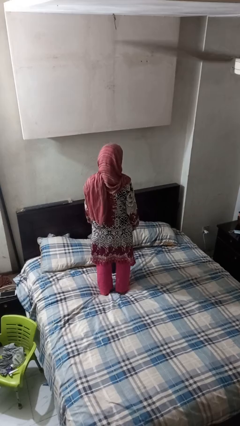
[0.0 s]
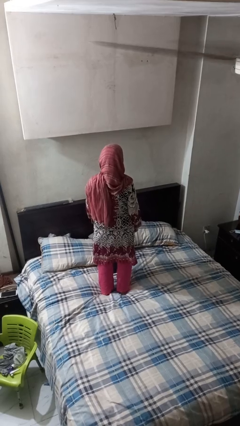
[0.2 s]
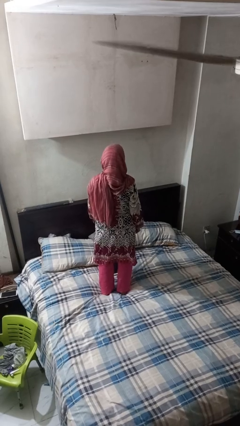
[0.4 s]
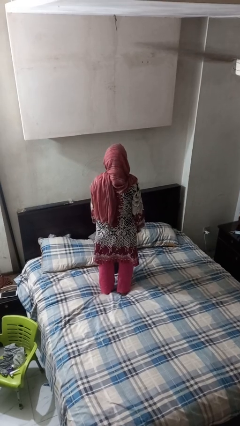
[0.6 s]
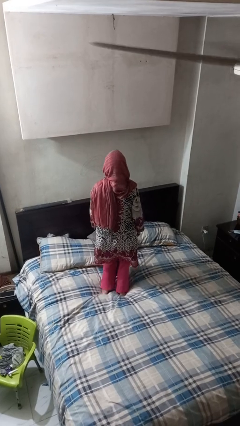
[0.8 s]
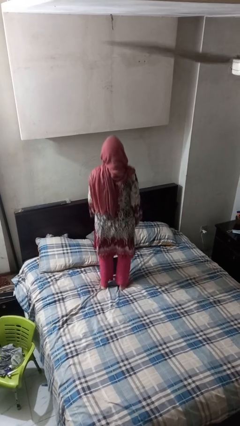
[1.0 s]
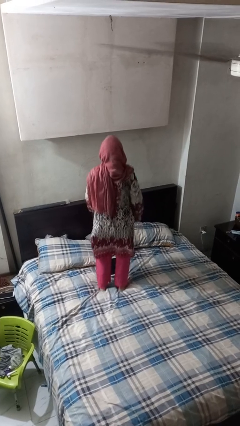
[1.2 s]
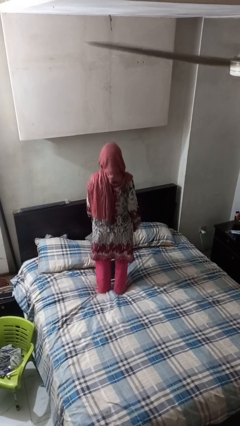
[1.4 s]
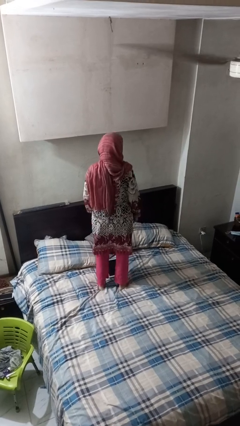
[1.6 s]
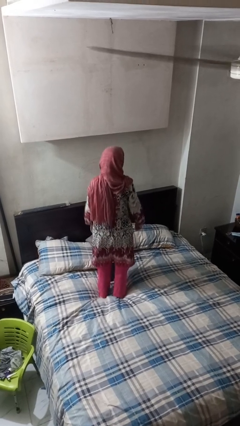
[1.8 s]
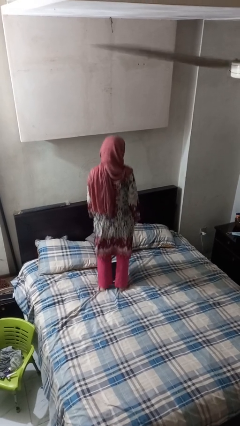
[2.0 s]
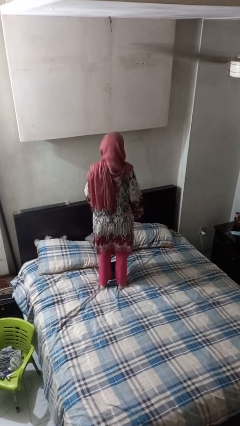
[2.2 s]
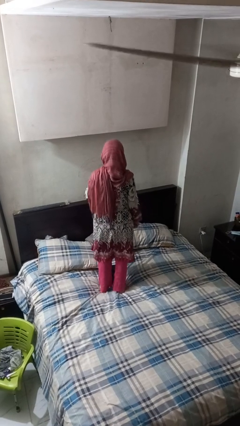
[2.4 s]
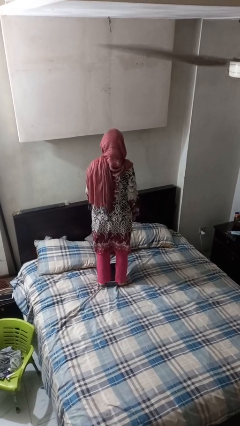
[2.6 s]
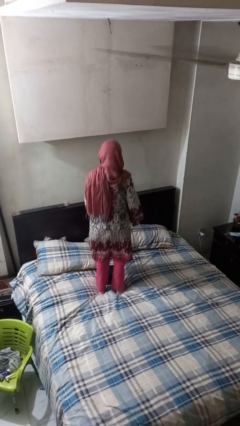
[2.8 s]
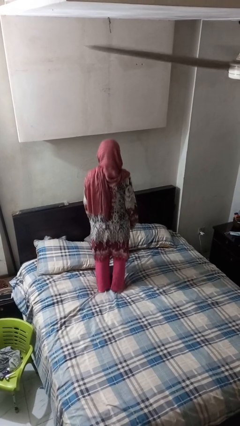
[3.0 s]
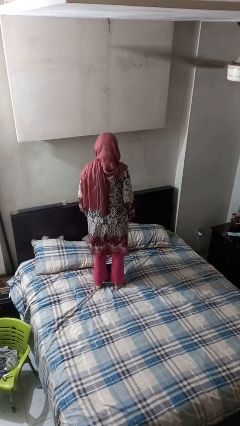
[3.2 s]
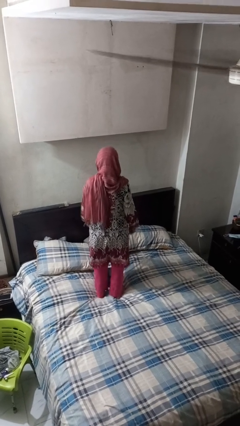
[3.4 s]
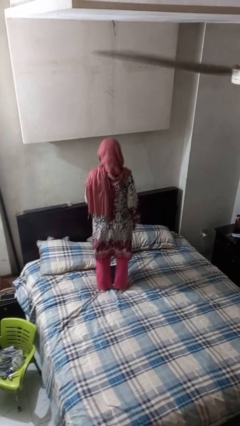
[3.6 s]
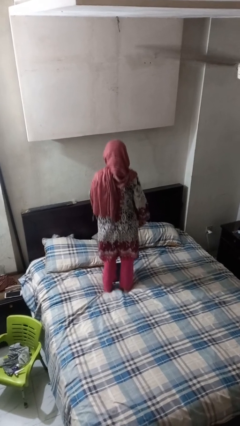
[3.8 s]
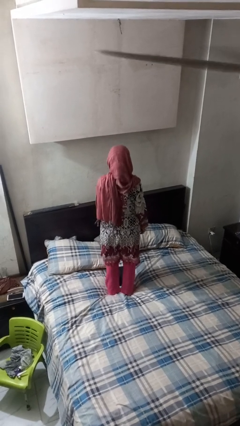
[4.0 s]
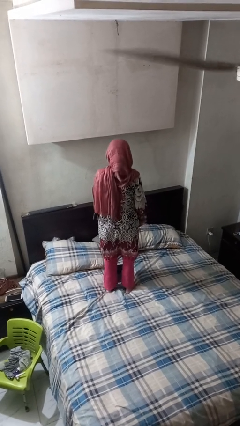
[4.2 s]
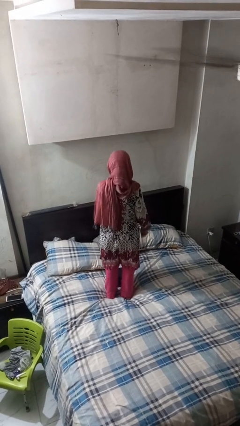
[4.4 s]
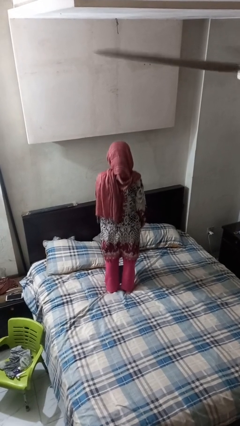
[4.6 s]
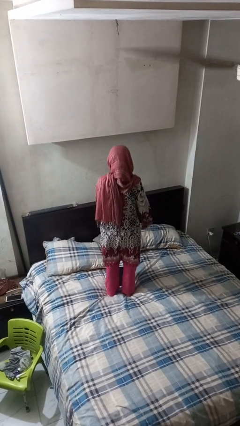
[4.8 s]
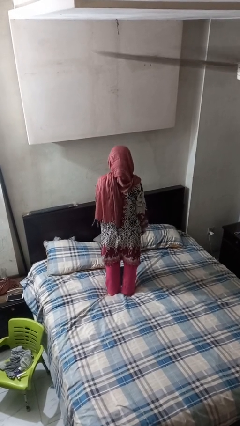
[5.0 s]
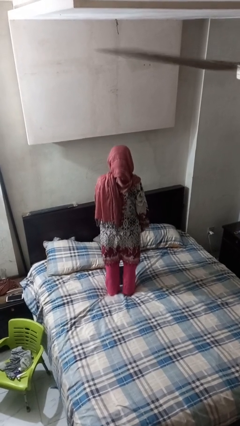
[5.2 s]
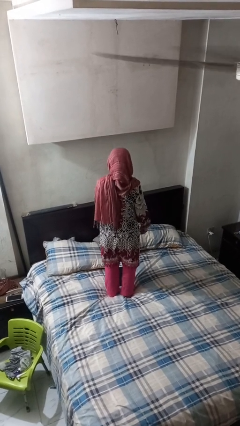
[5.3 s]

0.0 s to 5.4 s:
person jumps on bed

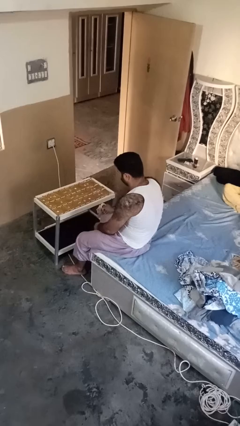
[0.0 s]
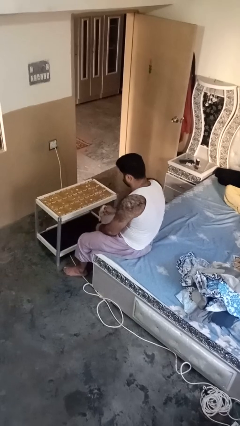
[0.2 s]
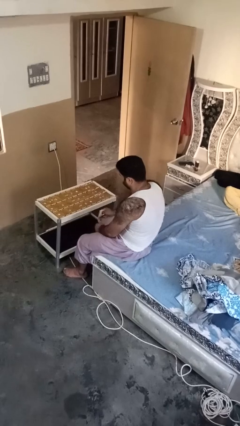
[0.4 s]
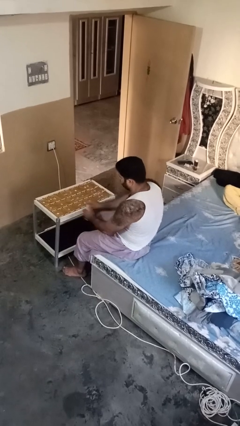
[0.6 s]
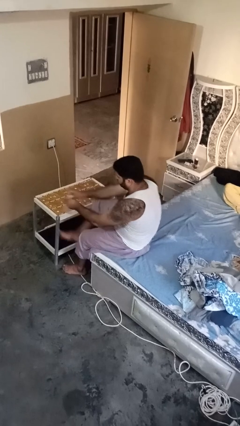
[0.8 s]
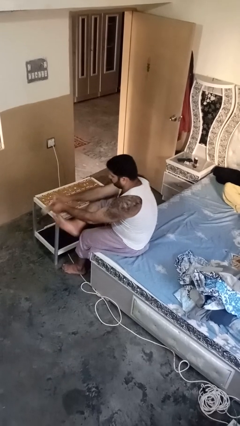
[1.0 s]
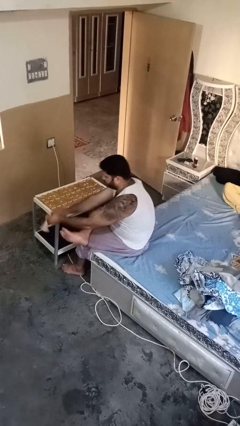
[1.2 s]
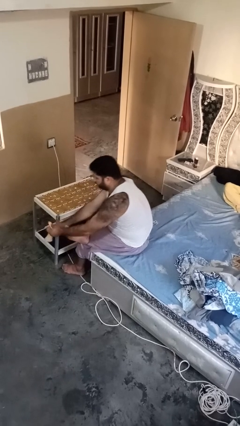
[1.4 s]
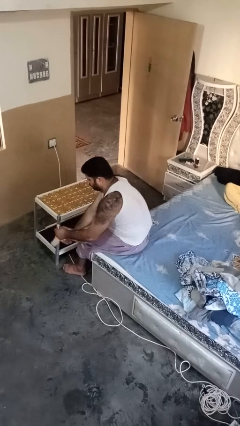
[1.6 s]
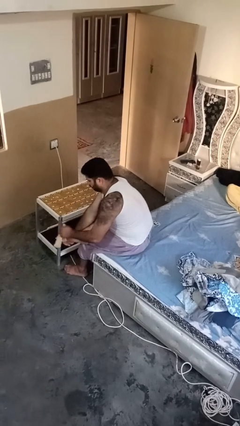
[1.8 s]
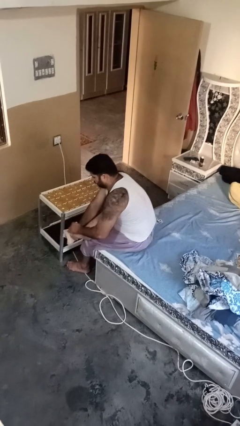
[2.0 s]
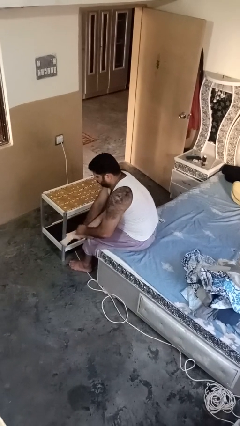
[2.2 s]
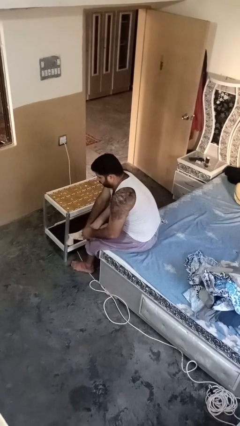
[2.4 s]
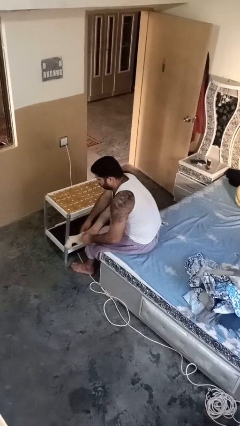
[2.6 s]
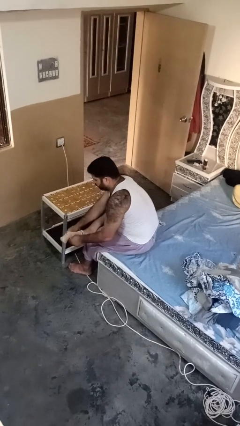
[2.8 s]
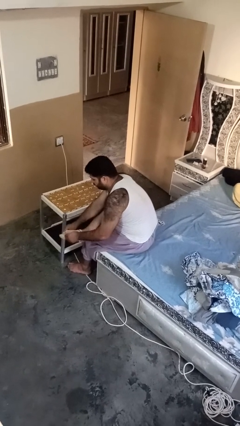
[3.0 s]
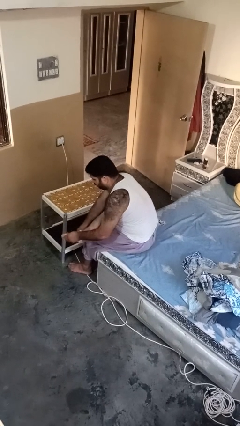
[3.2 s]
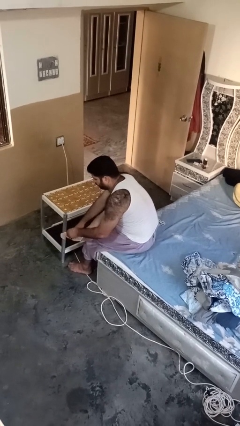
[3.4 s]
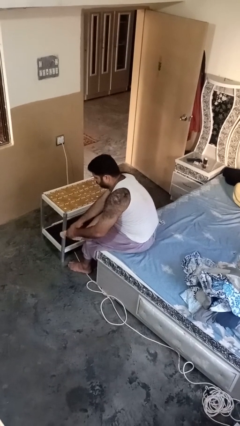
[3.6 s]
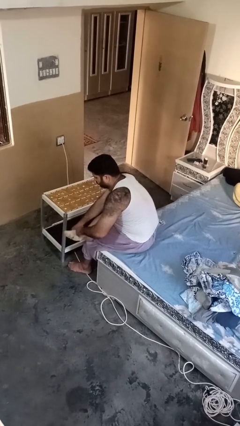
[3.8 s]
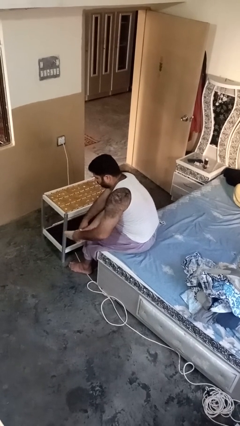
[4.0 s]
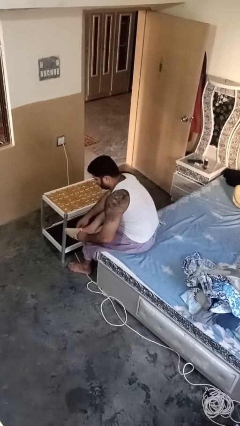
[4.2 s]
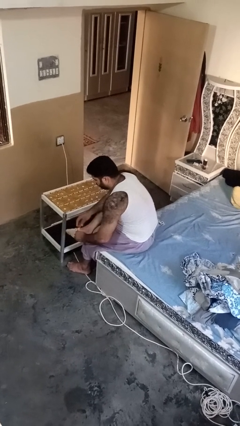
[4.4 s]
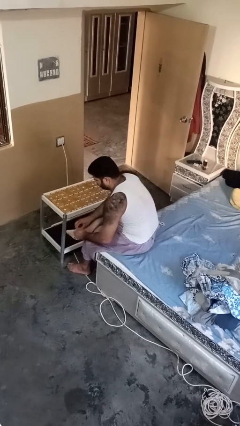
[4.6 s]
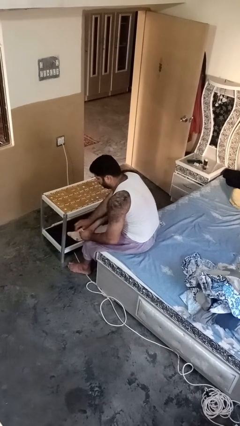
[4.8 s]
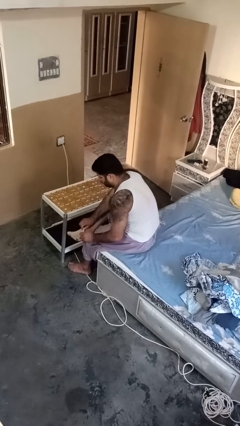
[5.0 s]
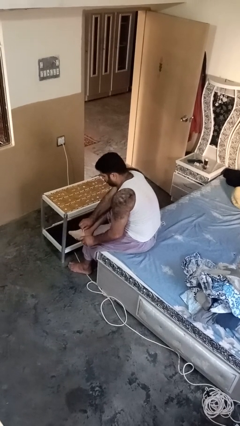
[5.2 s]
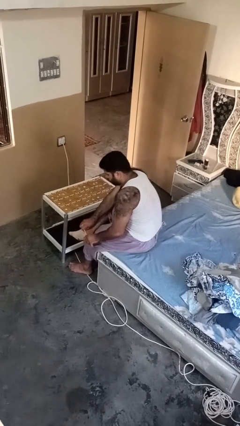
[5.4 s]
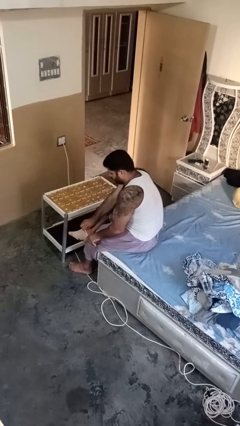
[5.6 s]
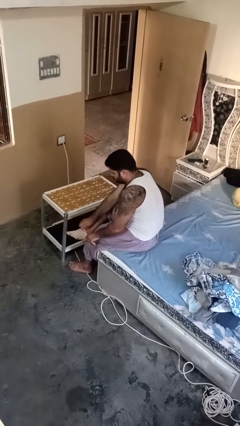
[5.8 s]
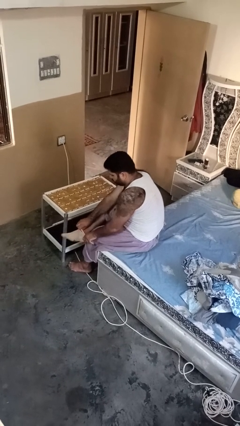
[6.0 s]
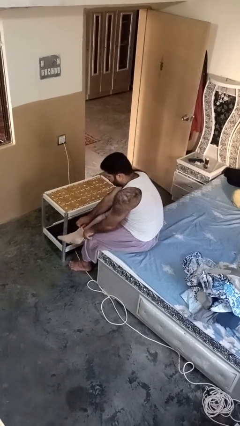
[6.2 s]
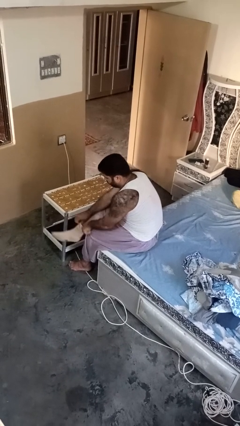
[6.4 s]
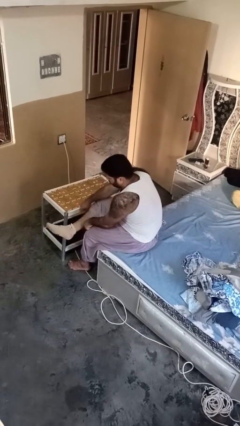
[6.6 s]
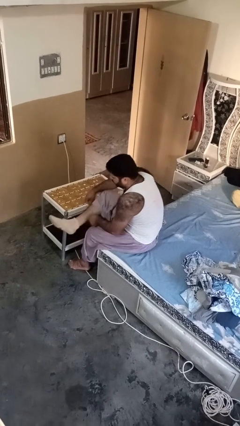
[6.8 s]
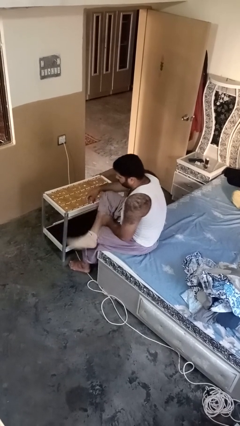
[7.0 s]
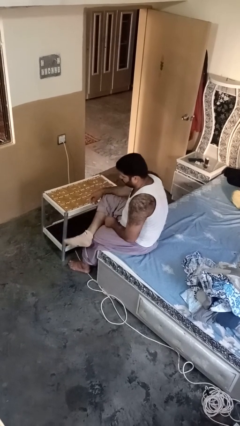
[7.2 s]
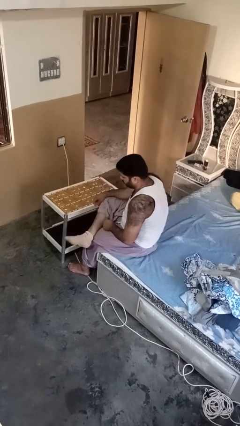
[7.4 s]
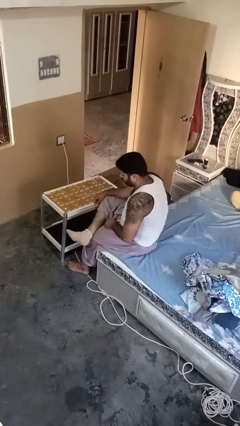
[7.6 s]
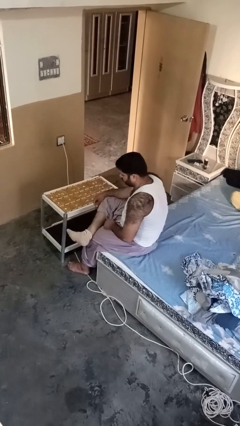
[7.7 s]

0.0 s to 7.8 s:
person puts on socks

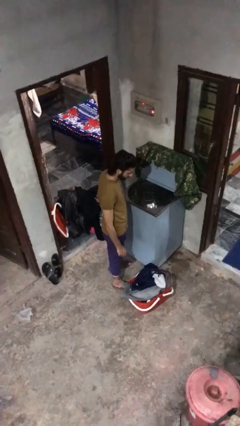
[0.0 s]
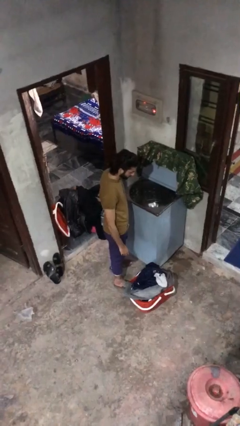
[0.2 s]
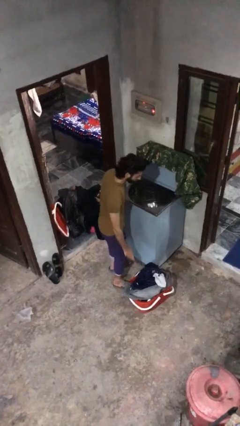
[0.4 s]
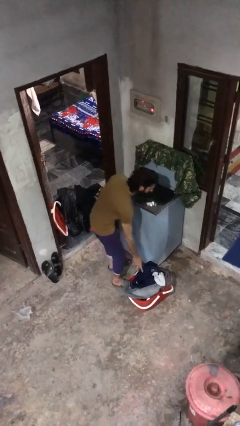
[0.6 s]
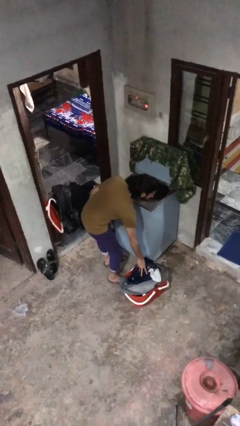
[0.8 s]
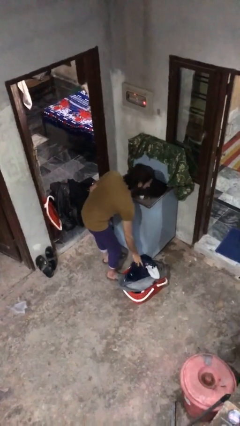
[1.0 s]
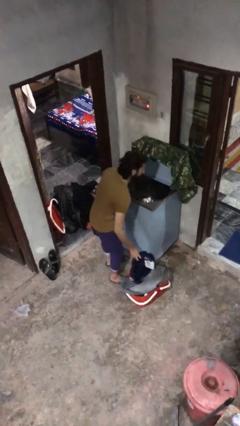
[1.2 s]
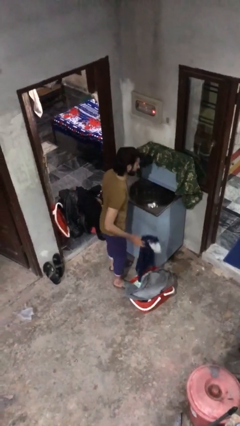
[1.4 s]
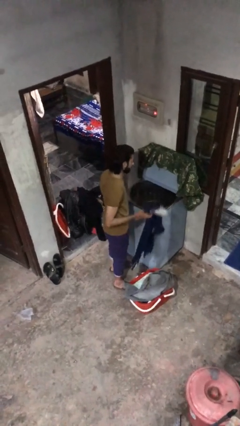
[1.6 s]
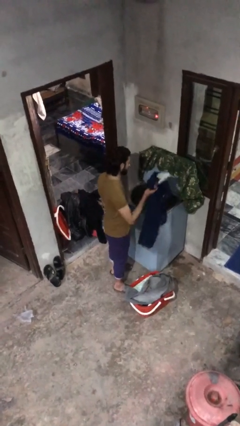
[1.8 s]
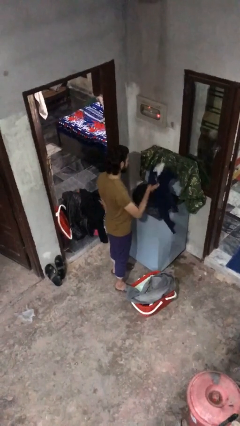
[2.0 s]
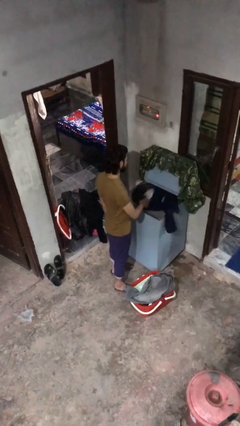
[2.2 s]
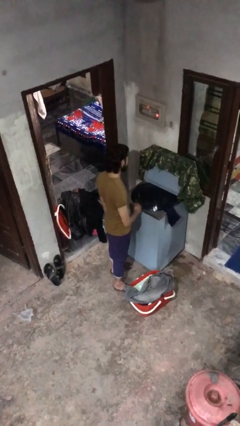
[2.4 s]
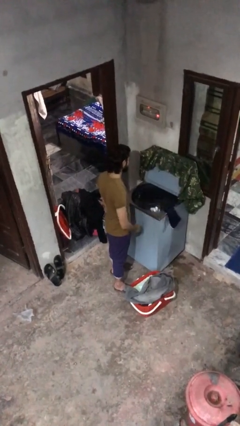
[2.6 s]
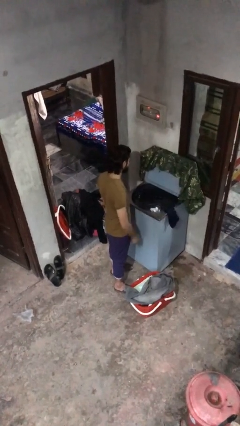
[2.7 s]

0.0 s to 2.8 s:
person loads clotheswasher

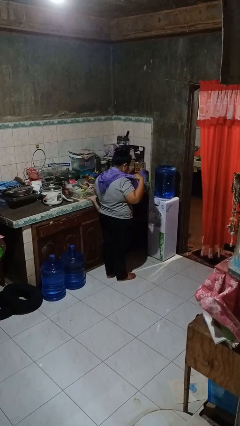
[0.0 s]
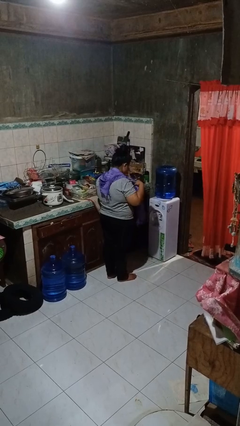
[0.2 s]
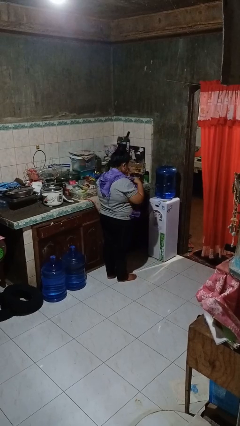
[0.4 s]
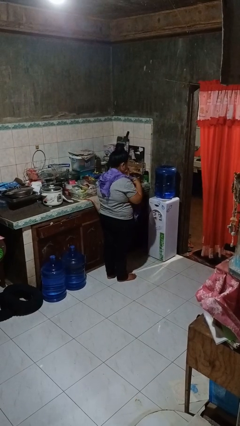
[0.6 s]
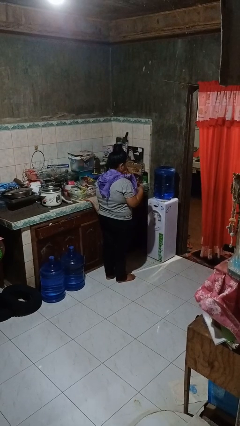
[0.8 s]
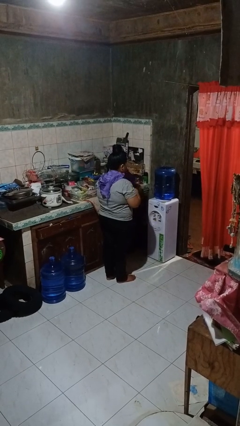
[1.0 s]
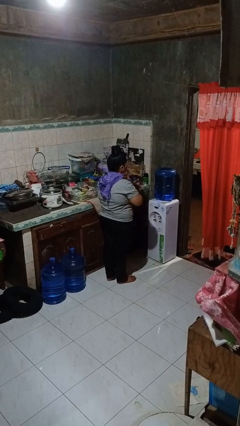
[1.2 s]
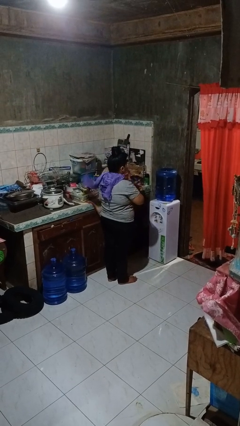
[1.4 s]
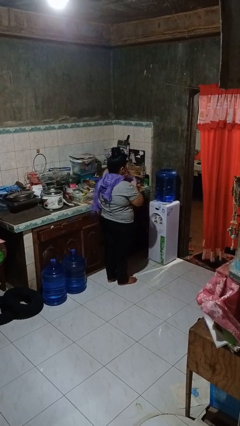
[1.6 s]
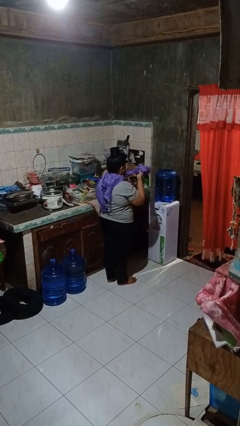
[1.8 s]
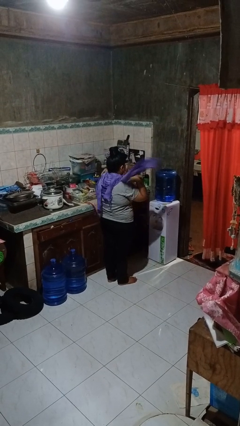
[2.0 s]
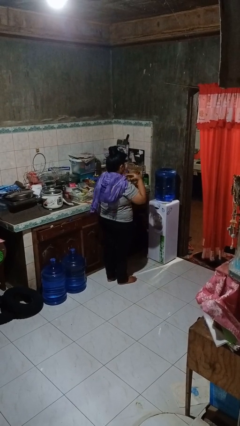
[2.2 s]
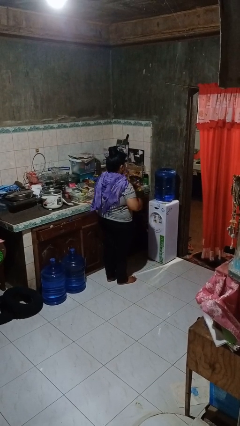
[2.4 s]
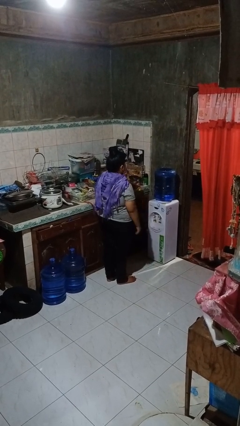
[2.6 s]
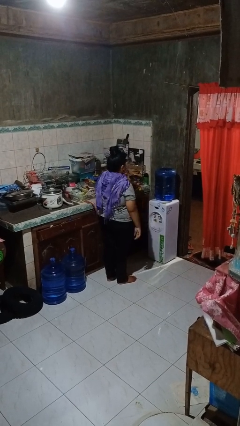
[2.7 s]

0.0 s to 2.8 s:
person puts on scarf
